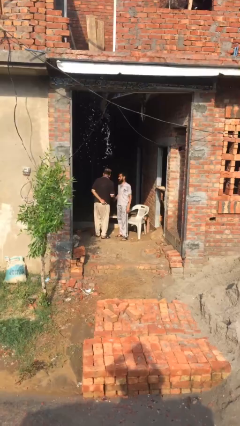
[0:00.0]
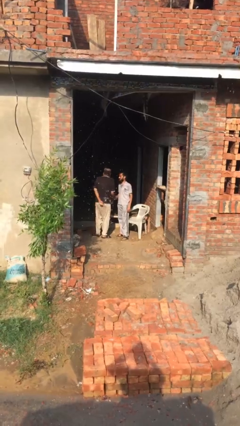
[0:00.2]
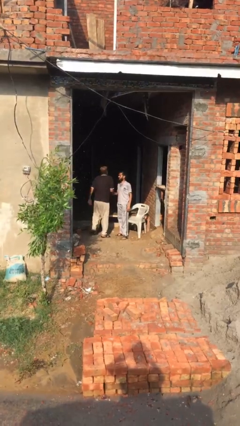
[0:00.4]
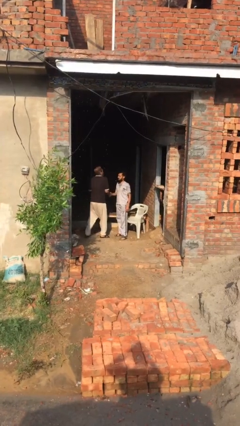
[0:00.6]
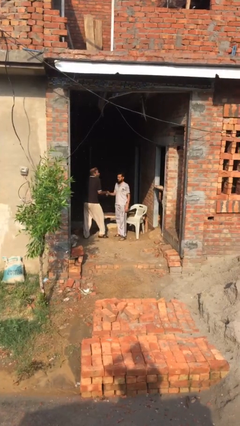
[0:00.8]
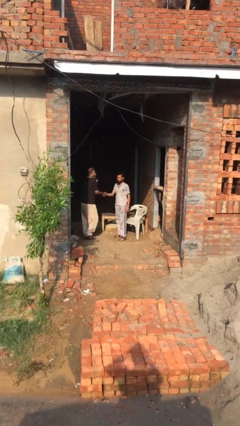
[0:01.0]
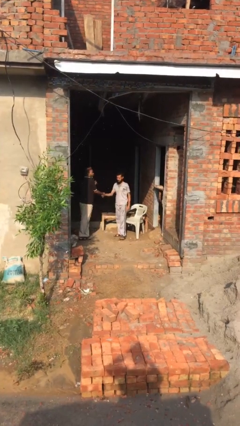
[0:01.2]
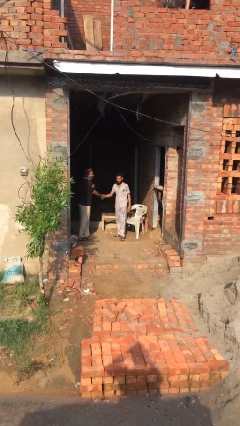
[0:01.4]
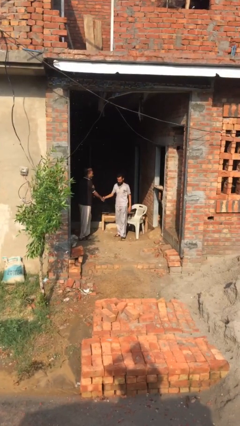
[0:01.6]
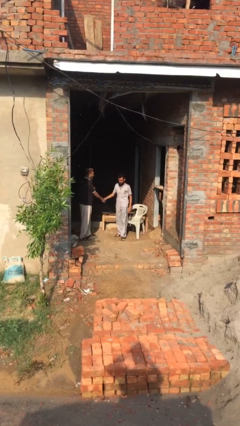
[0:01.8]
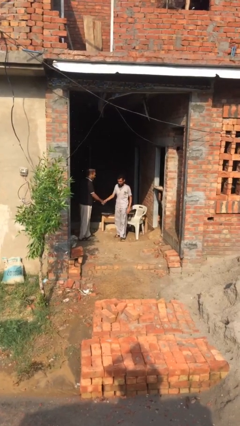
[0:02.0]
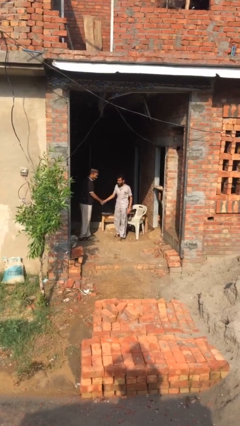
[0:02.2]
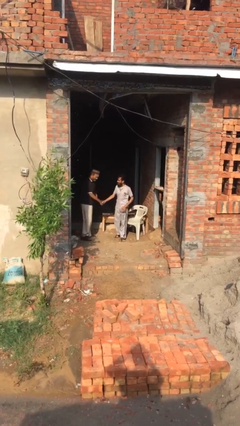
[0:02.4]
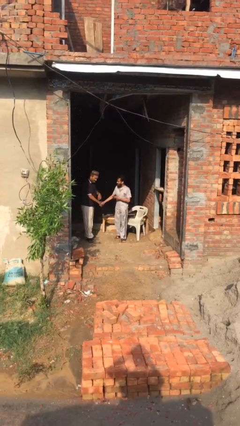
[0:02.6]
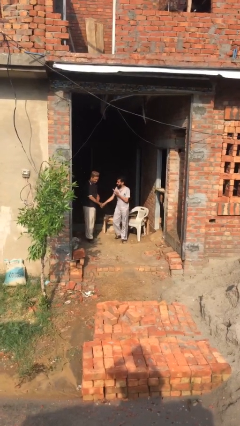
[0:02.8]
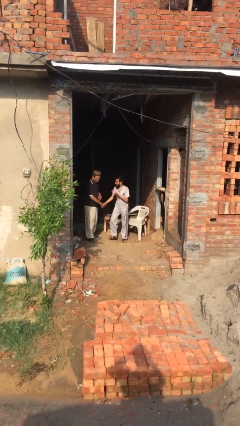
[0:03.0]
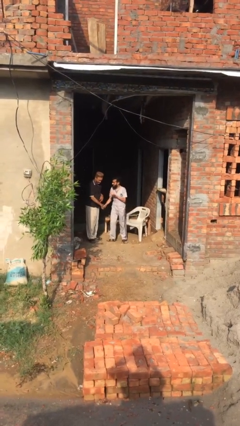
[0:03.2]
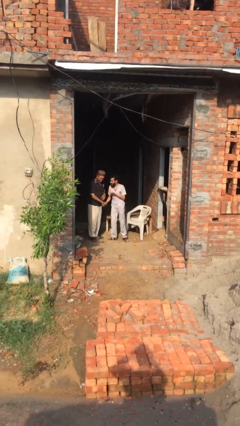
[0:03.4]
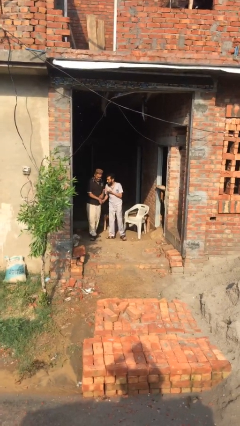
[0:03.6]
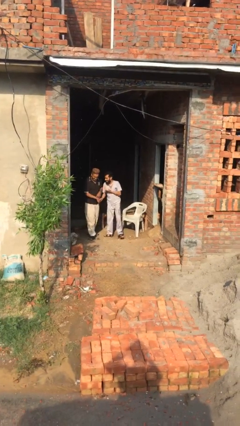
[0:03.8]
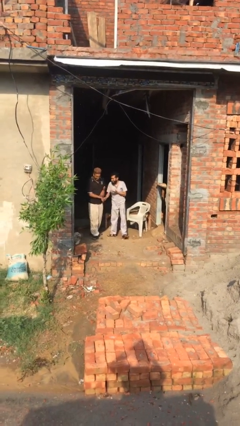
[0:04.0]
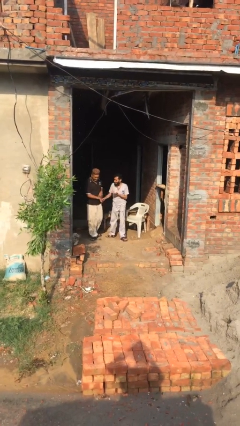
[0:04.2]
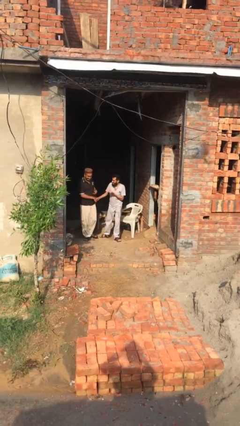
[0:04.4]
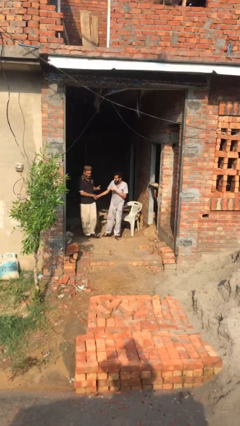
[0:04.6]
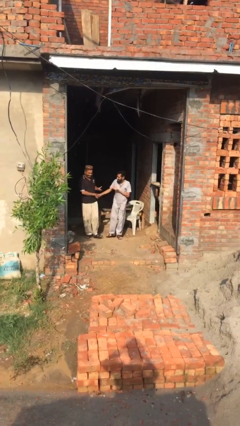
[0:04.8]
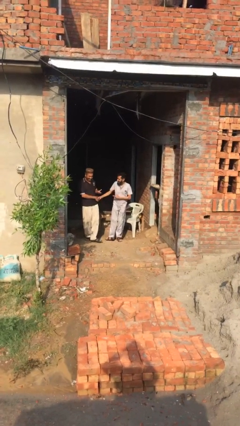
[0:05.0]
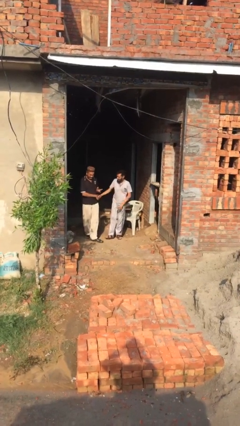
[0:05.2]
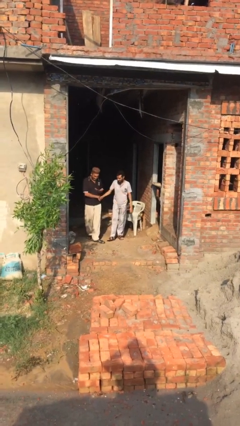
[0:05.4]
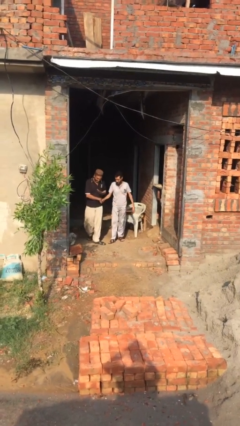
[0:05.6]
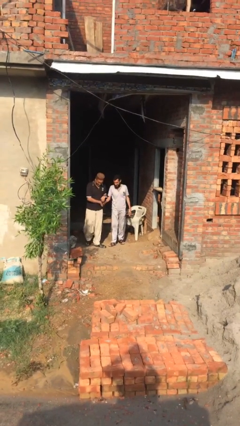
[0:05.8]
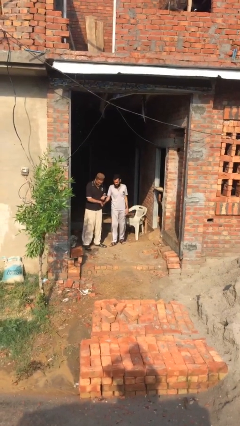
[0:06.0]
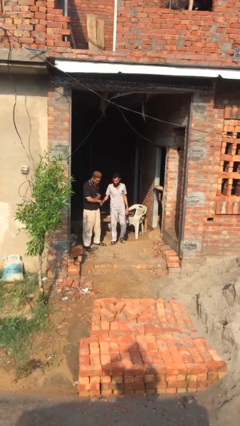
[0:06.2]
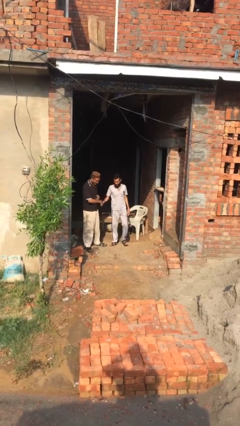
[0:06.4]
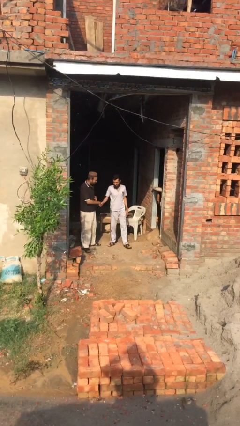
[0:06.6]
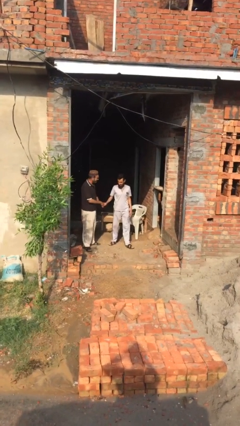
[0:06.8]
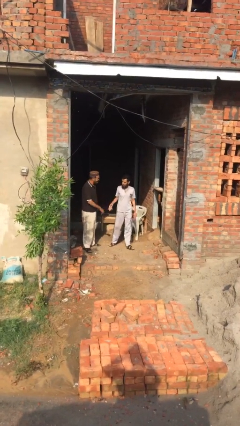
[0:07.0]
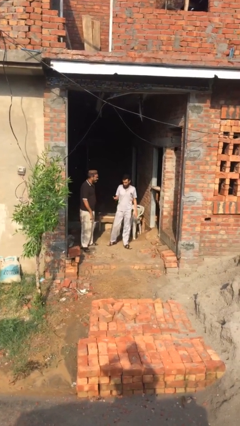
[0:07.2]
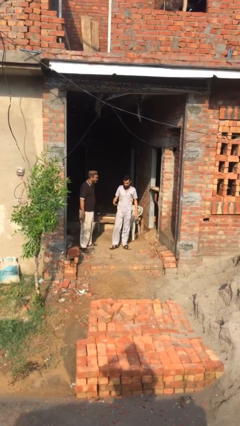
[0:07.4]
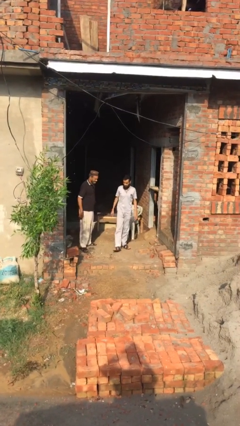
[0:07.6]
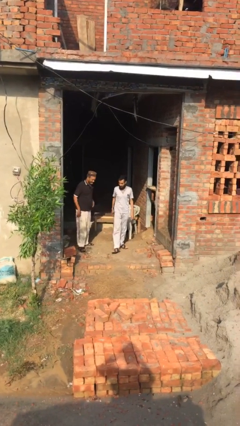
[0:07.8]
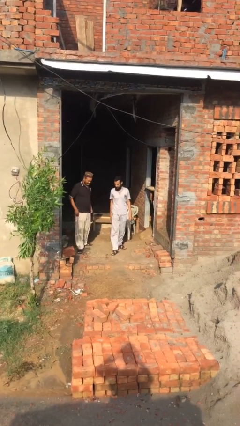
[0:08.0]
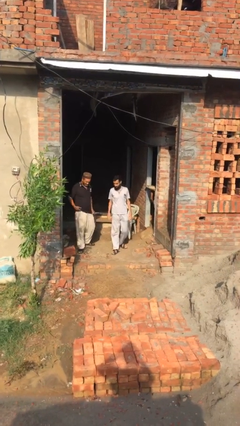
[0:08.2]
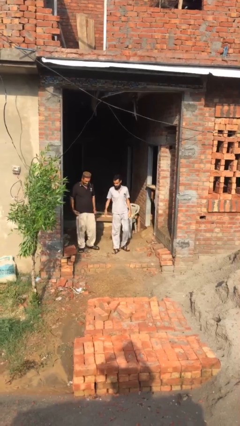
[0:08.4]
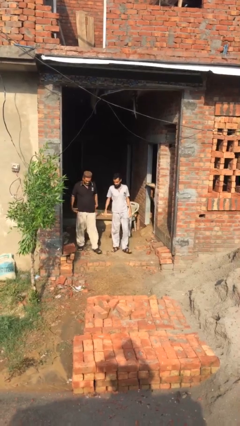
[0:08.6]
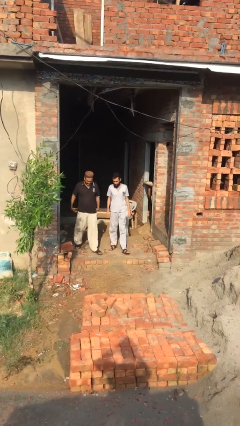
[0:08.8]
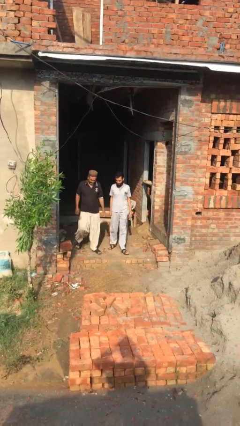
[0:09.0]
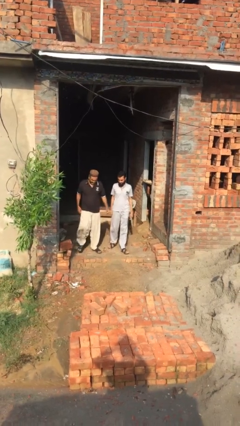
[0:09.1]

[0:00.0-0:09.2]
person talks to person

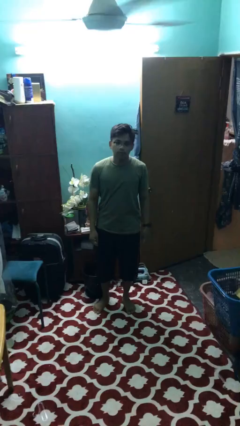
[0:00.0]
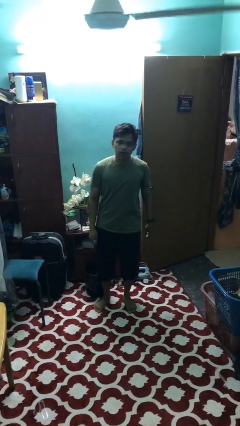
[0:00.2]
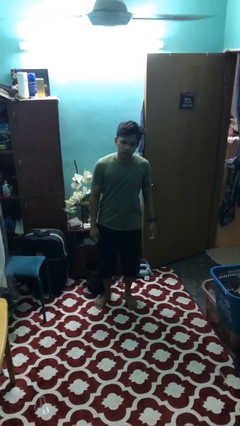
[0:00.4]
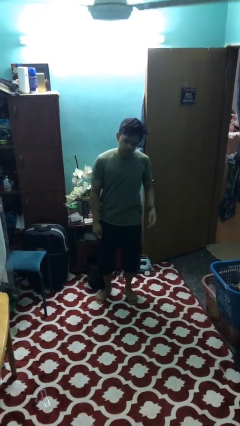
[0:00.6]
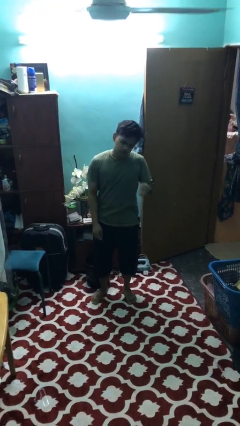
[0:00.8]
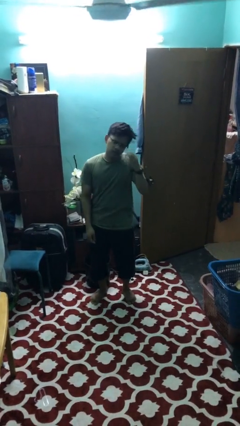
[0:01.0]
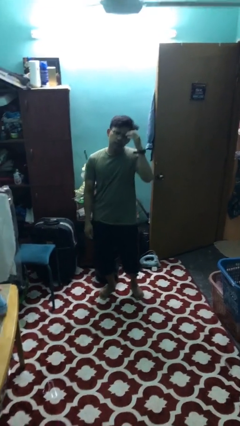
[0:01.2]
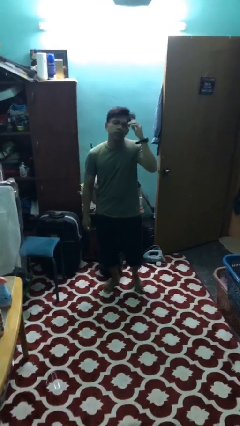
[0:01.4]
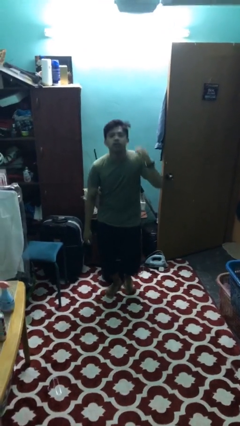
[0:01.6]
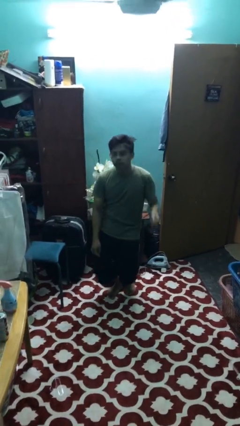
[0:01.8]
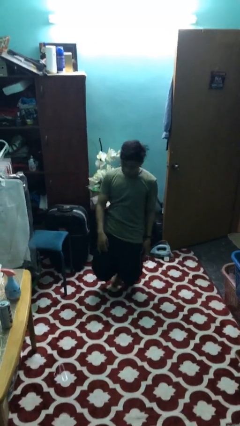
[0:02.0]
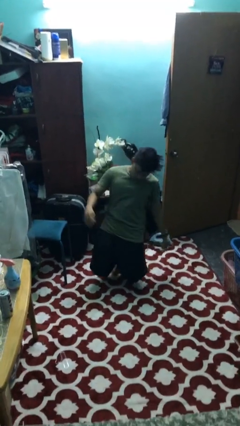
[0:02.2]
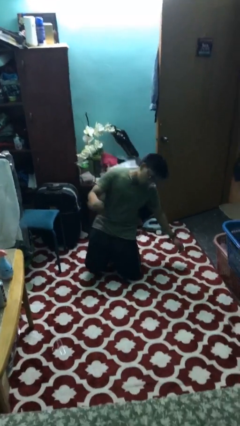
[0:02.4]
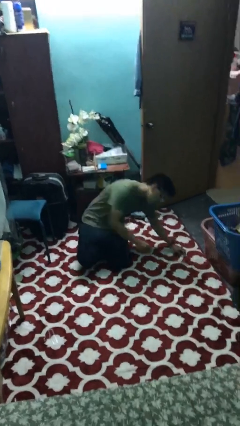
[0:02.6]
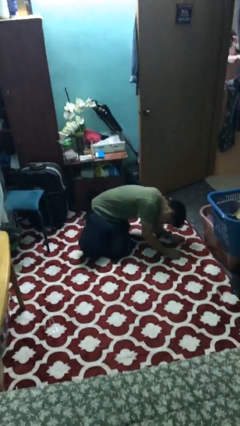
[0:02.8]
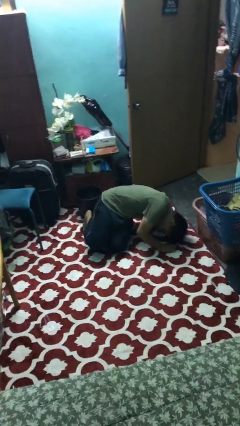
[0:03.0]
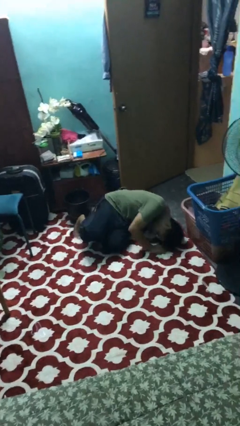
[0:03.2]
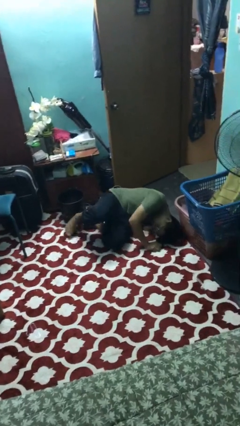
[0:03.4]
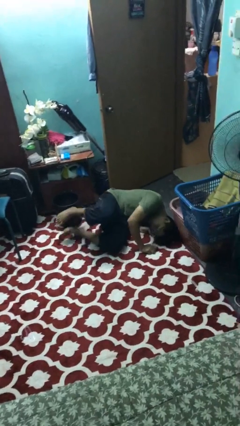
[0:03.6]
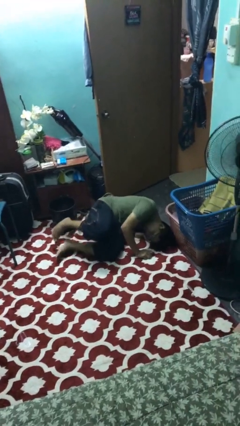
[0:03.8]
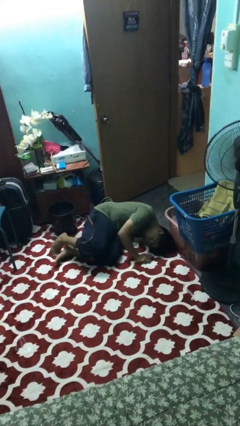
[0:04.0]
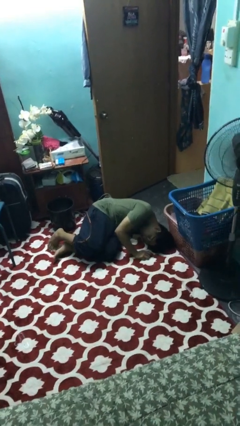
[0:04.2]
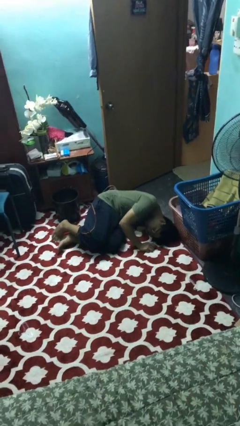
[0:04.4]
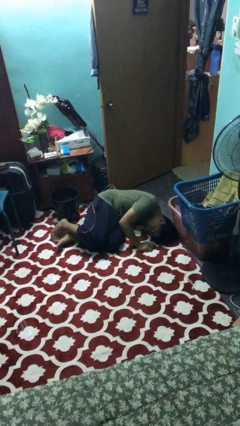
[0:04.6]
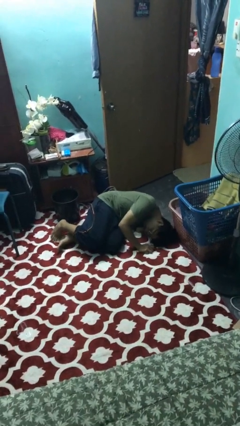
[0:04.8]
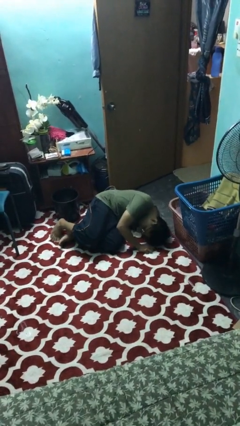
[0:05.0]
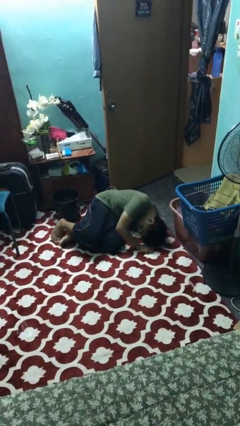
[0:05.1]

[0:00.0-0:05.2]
person falls while standing

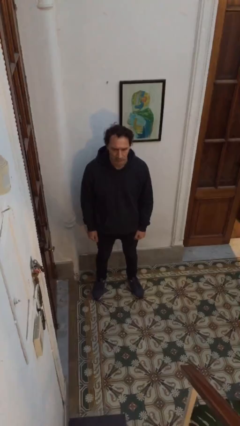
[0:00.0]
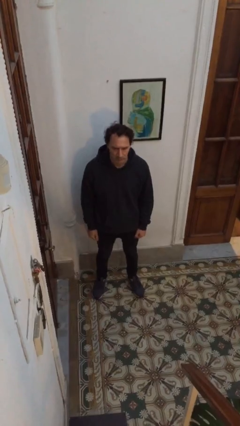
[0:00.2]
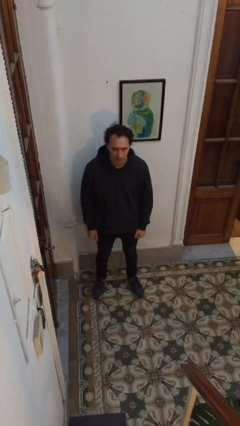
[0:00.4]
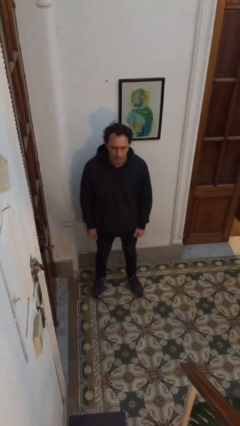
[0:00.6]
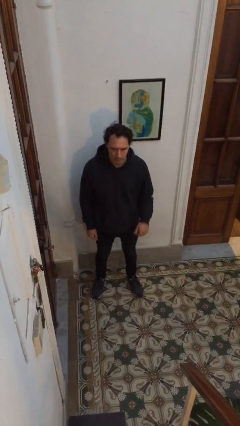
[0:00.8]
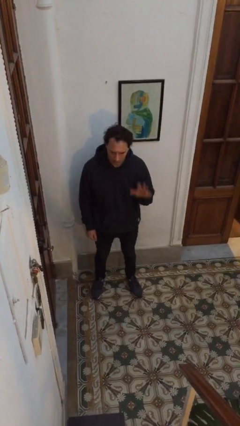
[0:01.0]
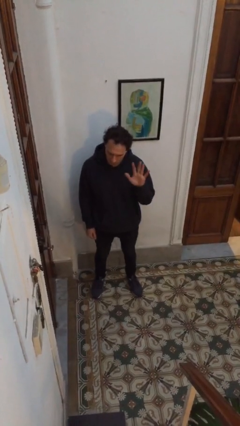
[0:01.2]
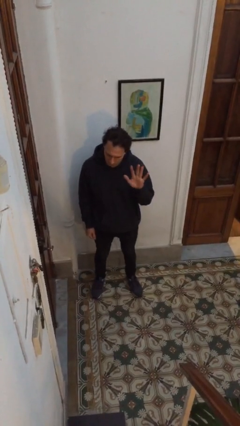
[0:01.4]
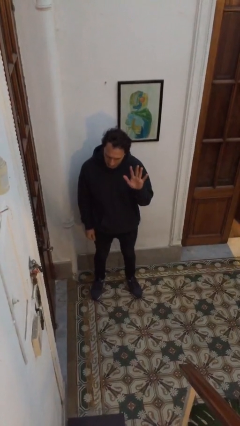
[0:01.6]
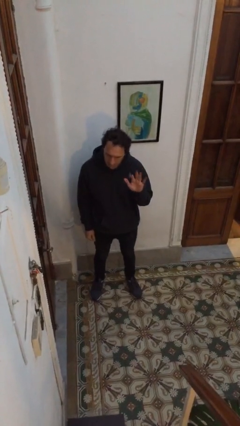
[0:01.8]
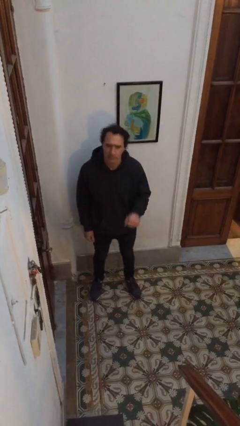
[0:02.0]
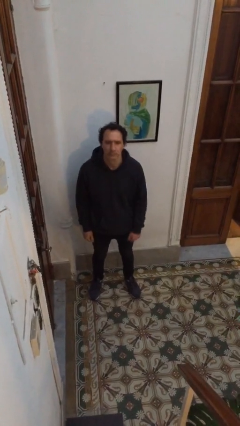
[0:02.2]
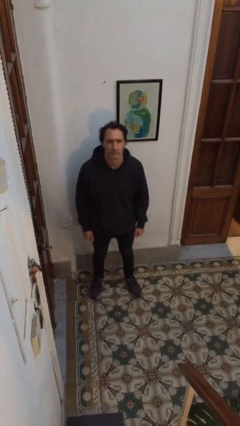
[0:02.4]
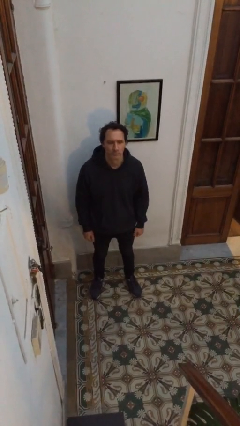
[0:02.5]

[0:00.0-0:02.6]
person gestures number five

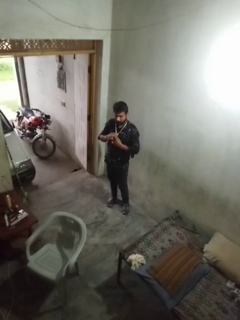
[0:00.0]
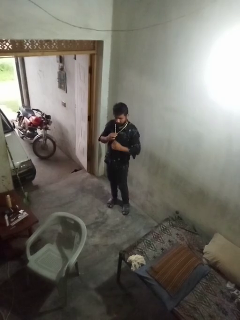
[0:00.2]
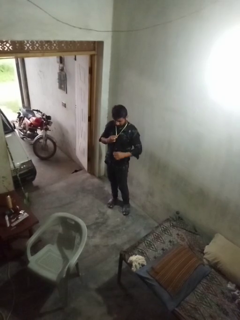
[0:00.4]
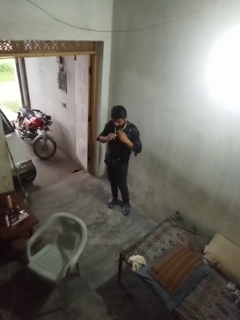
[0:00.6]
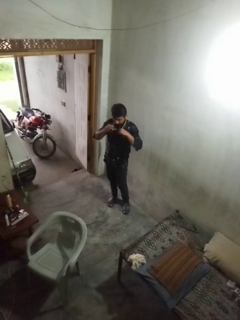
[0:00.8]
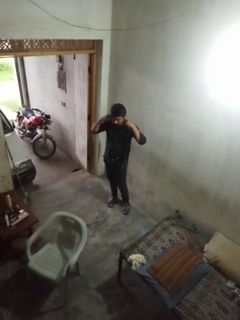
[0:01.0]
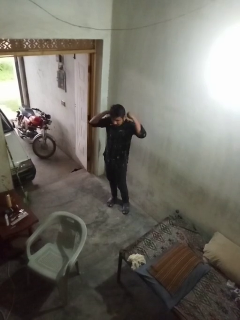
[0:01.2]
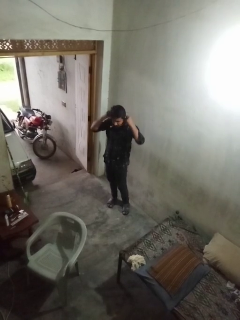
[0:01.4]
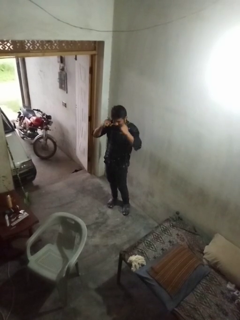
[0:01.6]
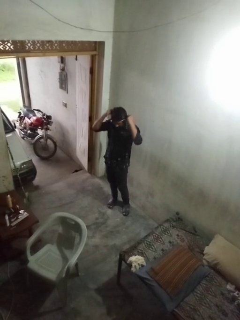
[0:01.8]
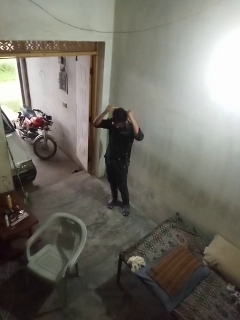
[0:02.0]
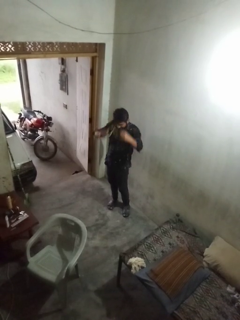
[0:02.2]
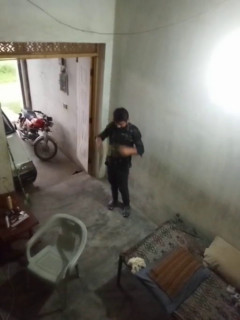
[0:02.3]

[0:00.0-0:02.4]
person takes off necklace
